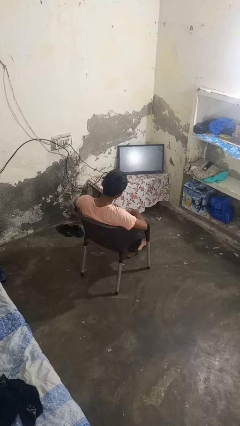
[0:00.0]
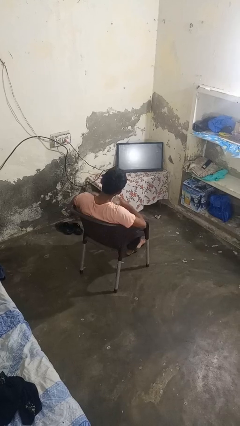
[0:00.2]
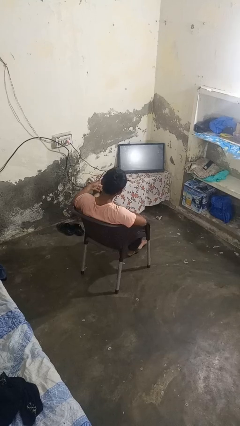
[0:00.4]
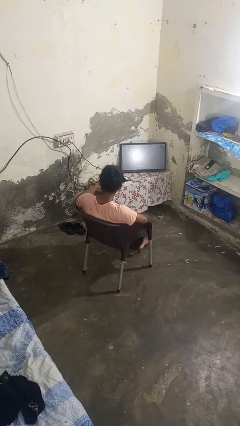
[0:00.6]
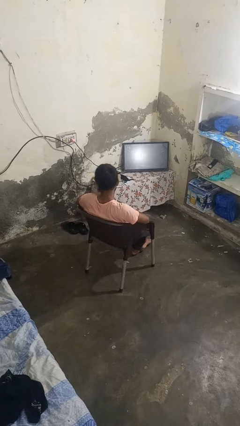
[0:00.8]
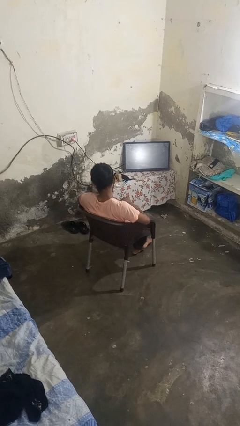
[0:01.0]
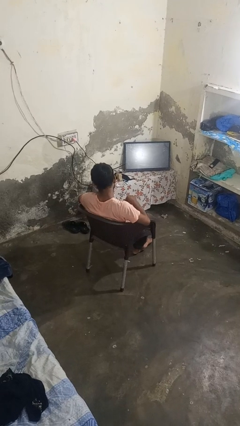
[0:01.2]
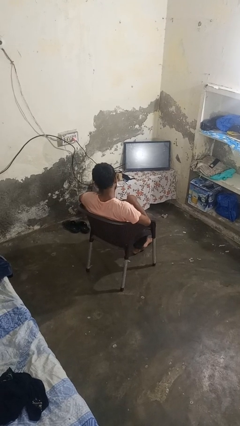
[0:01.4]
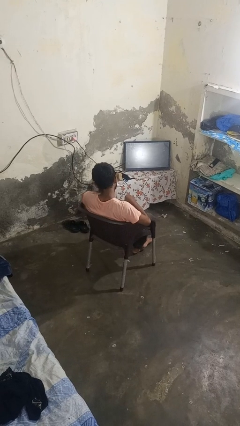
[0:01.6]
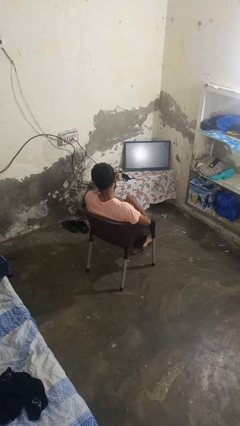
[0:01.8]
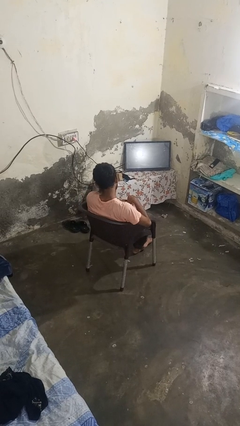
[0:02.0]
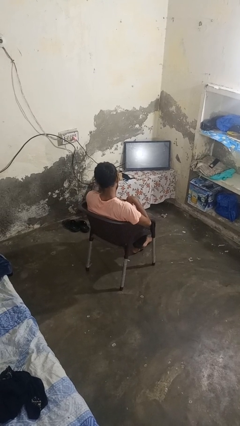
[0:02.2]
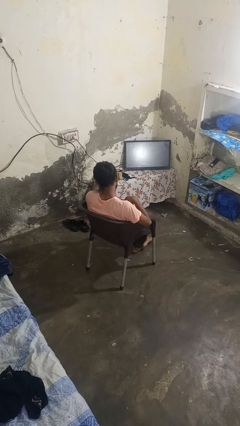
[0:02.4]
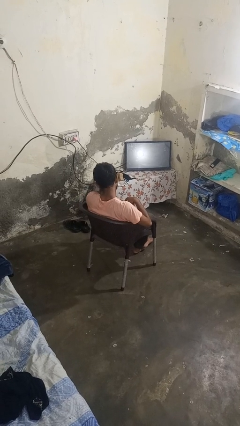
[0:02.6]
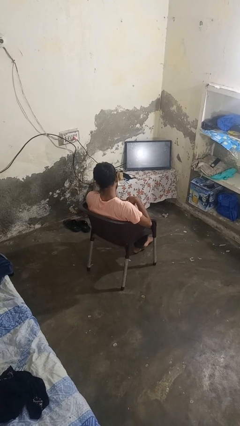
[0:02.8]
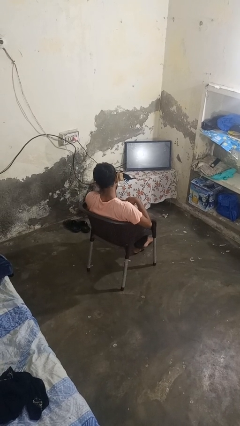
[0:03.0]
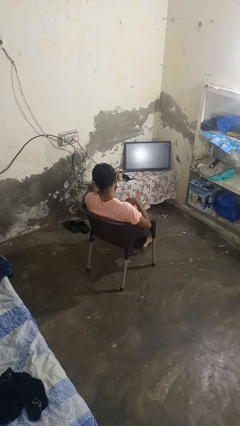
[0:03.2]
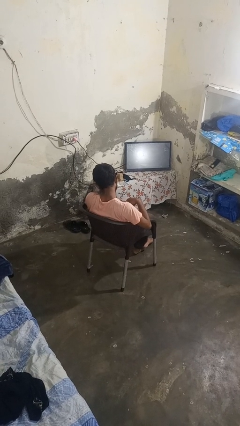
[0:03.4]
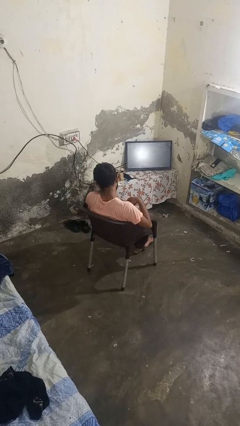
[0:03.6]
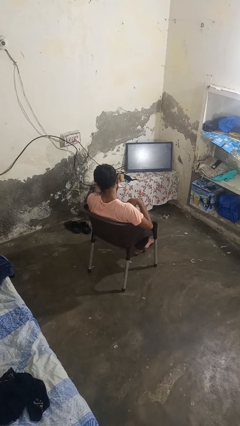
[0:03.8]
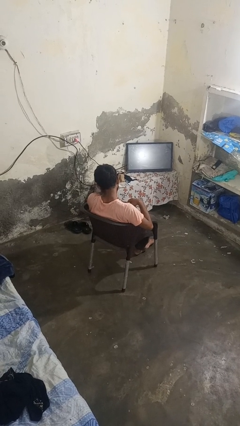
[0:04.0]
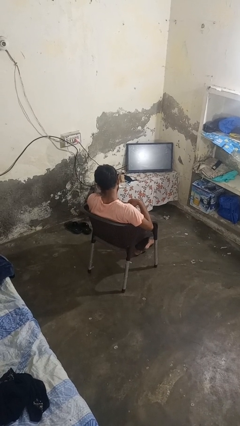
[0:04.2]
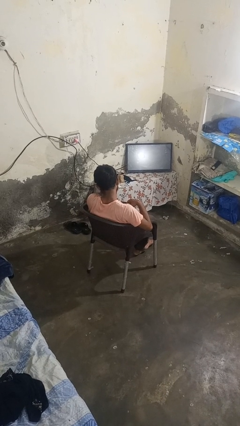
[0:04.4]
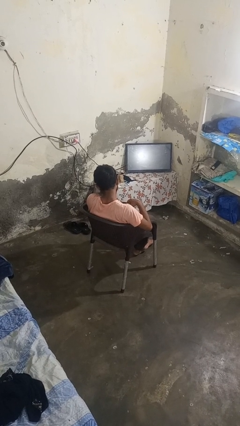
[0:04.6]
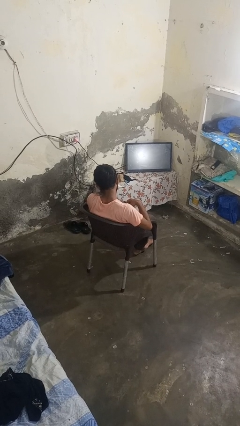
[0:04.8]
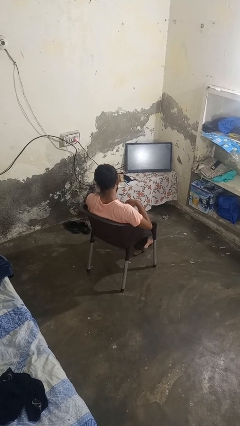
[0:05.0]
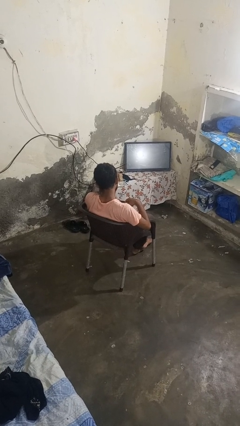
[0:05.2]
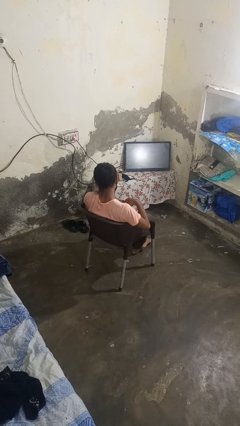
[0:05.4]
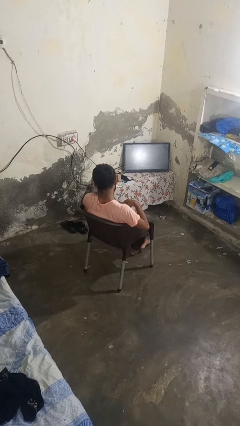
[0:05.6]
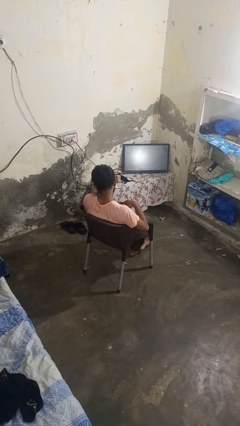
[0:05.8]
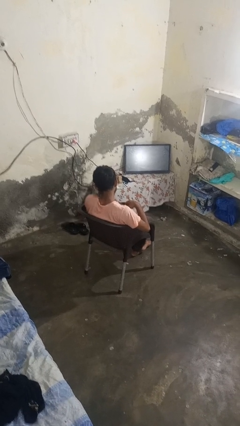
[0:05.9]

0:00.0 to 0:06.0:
person searches in purse

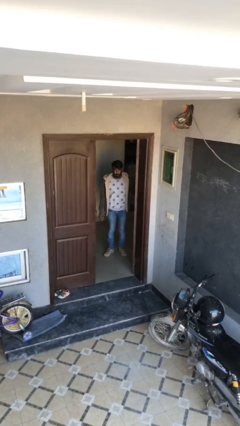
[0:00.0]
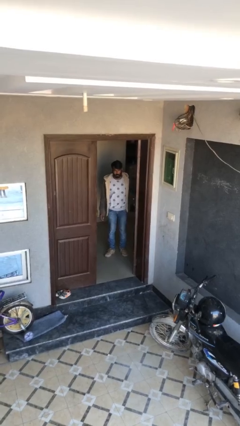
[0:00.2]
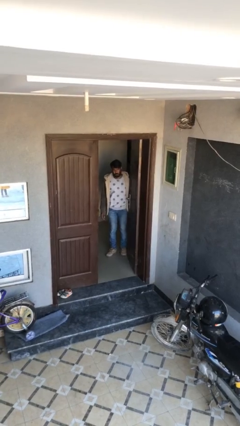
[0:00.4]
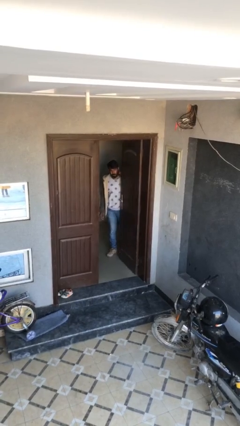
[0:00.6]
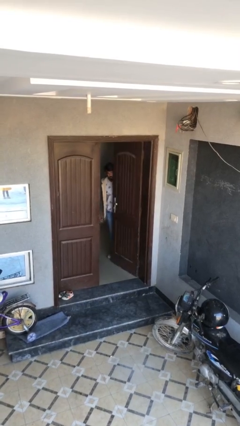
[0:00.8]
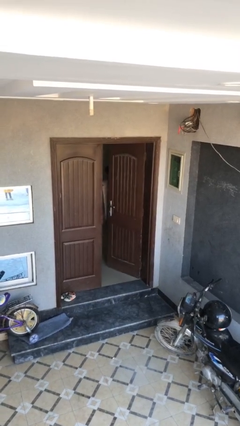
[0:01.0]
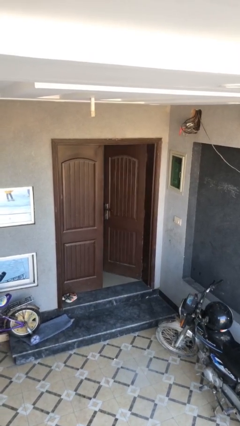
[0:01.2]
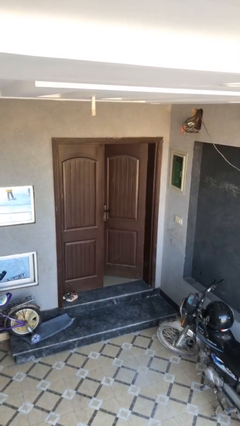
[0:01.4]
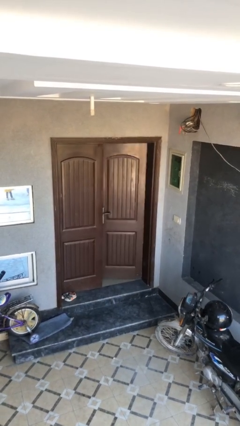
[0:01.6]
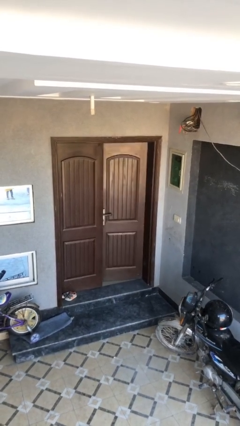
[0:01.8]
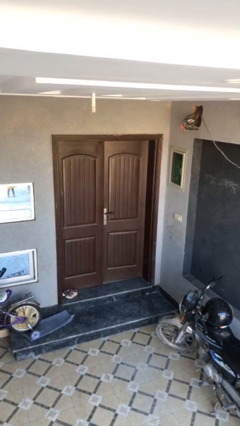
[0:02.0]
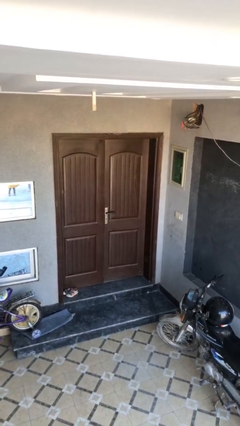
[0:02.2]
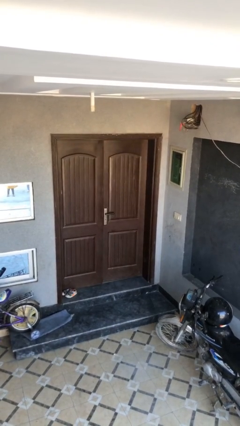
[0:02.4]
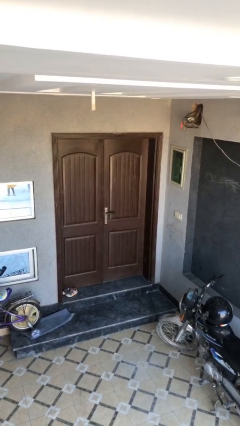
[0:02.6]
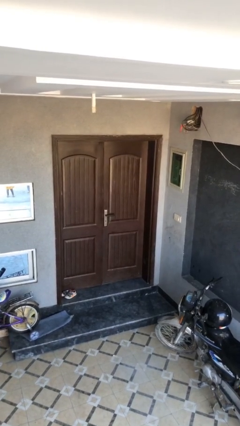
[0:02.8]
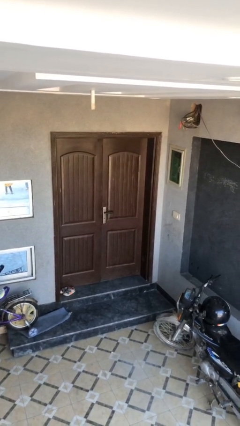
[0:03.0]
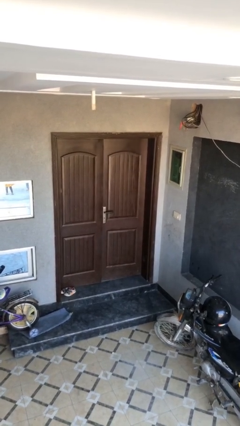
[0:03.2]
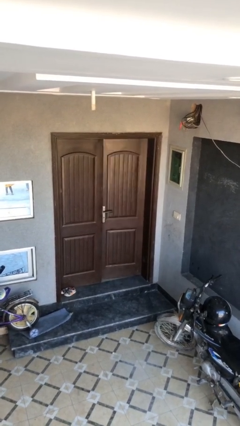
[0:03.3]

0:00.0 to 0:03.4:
person closes facility door

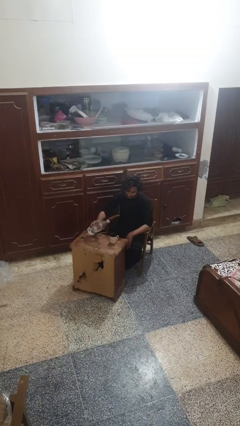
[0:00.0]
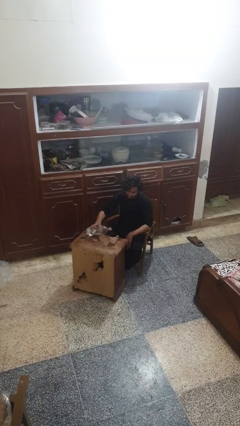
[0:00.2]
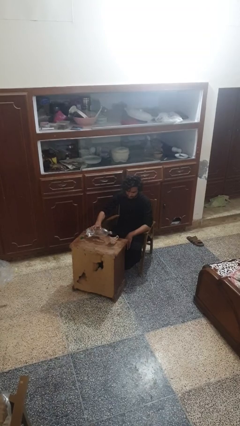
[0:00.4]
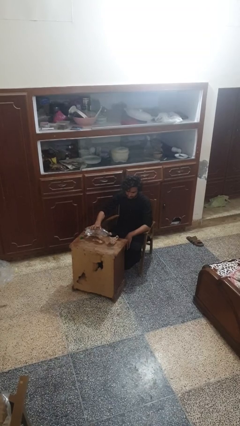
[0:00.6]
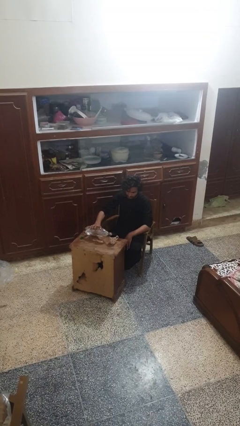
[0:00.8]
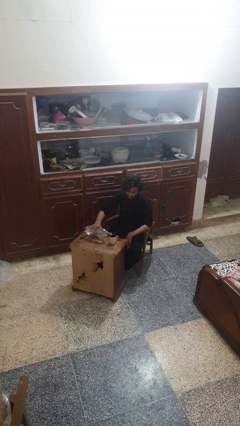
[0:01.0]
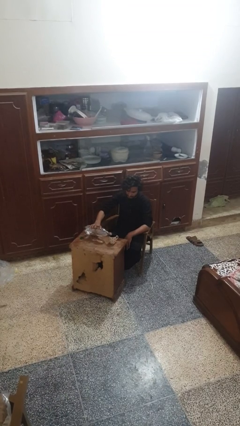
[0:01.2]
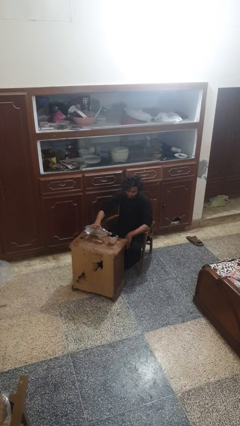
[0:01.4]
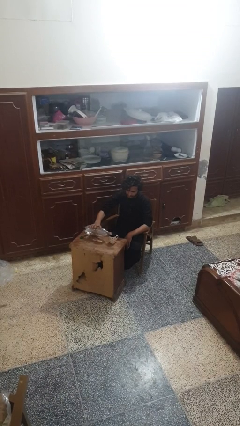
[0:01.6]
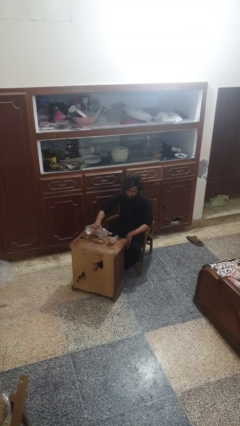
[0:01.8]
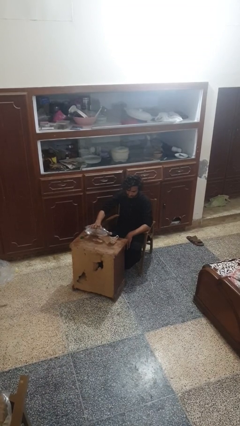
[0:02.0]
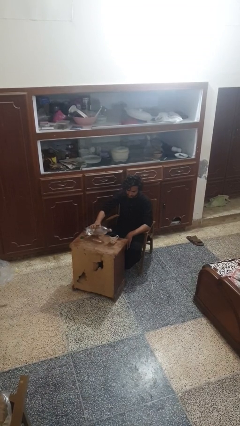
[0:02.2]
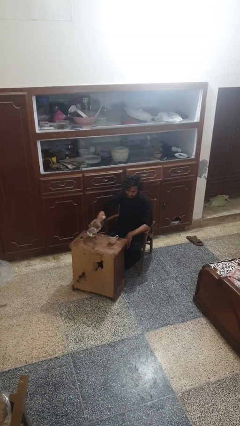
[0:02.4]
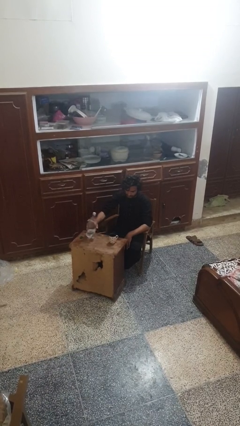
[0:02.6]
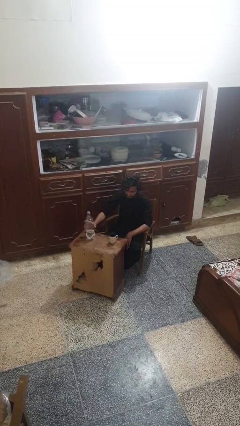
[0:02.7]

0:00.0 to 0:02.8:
person pours liquid into cup

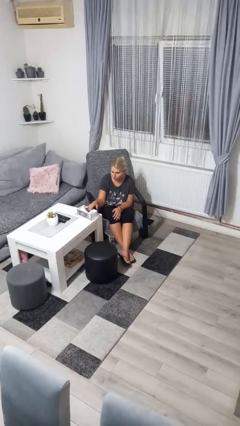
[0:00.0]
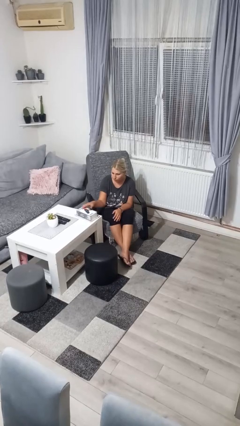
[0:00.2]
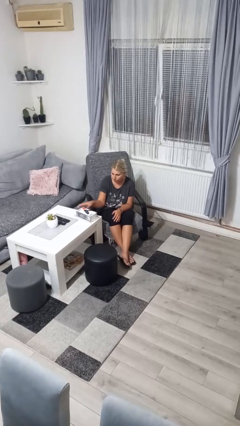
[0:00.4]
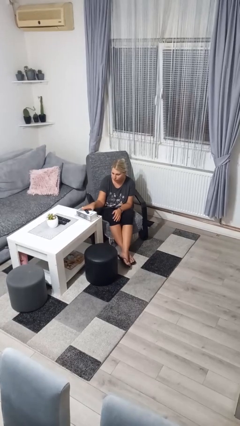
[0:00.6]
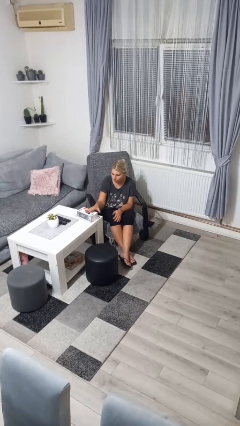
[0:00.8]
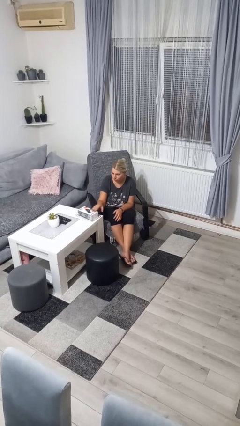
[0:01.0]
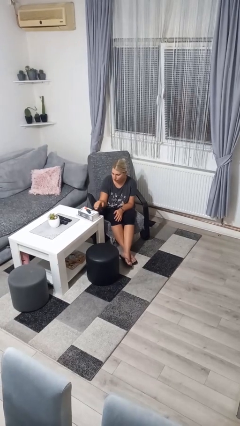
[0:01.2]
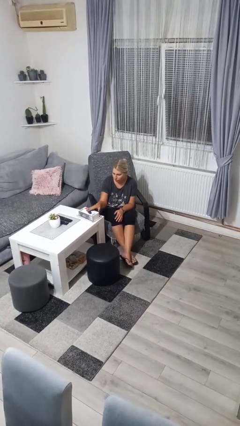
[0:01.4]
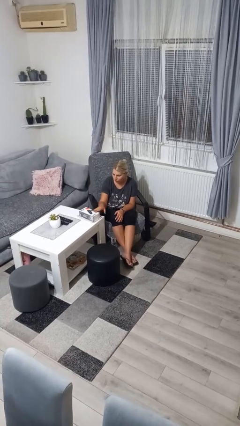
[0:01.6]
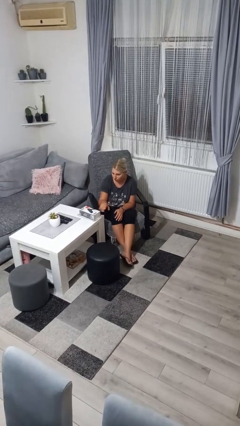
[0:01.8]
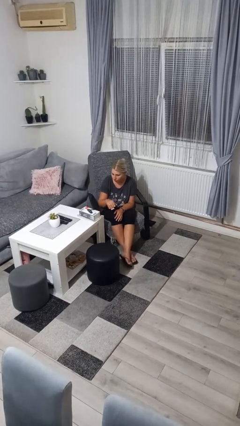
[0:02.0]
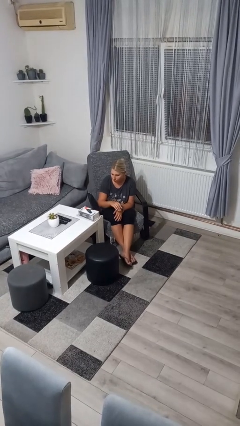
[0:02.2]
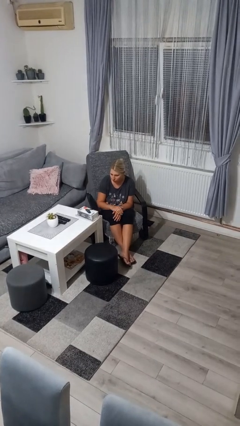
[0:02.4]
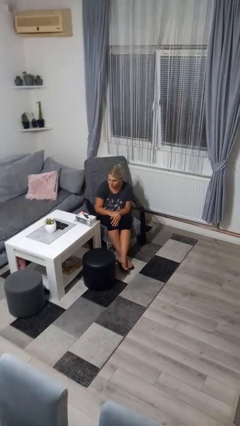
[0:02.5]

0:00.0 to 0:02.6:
person waves hand over object

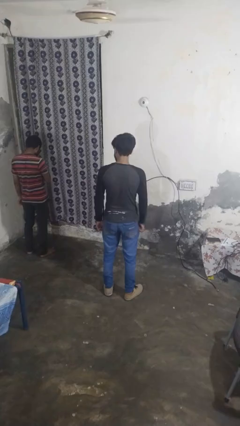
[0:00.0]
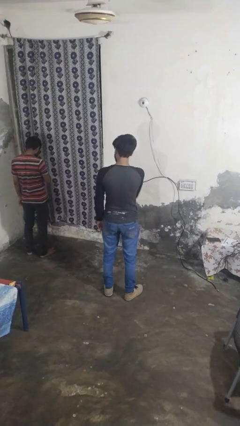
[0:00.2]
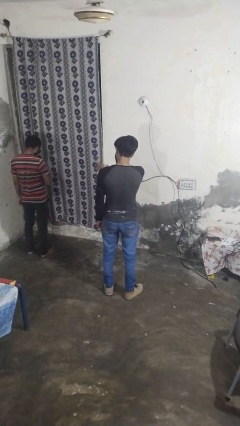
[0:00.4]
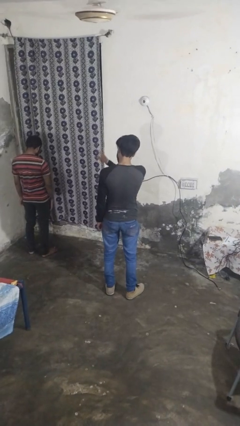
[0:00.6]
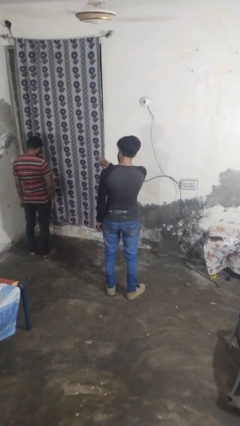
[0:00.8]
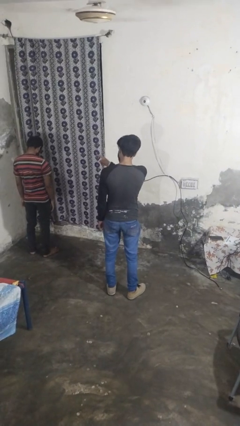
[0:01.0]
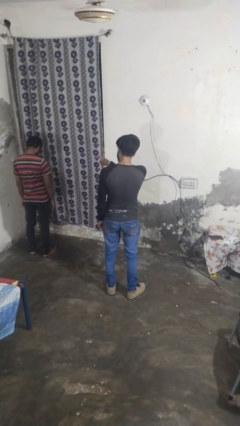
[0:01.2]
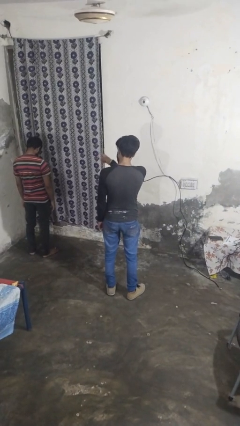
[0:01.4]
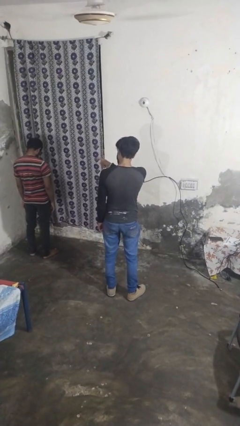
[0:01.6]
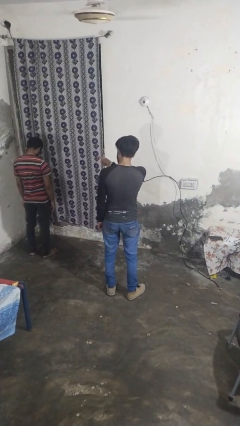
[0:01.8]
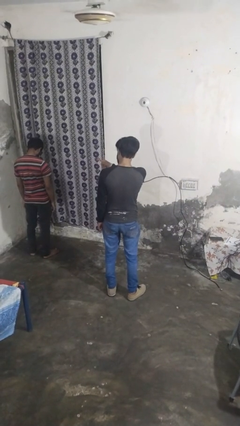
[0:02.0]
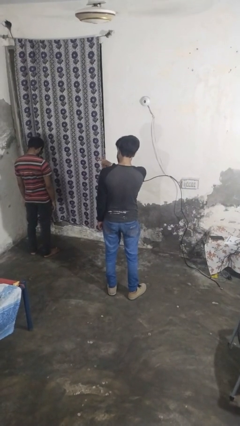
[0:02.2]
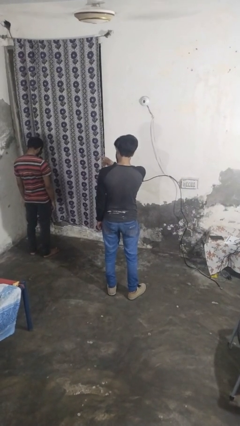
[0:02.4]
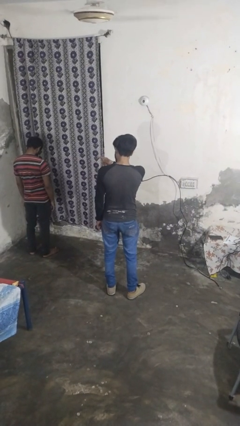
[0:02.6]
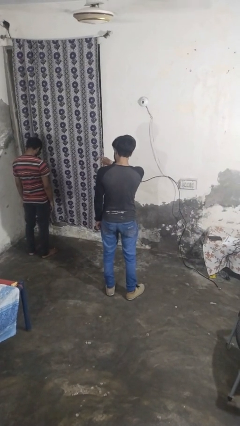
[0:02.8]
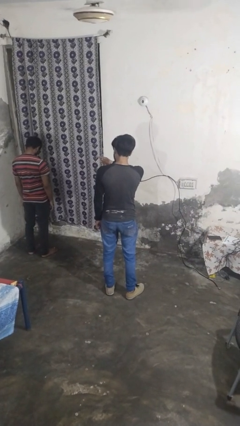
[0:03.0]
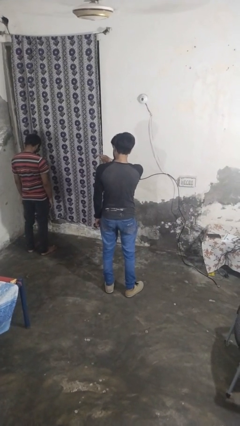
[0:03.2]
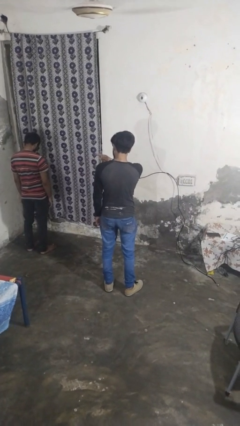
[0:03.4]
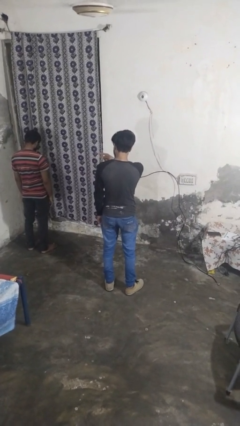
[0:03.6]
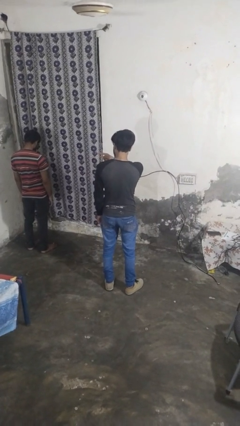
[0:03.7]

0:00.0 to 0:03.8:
person points at person
